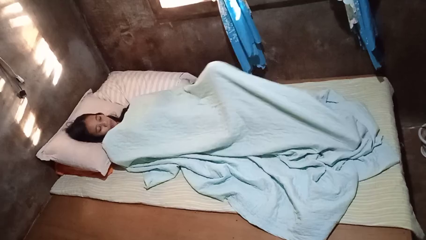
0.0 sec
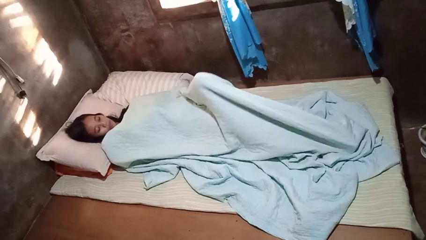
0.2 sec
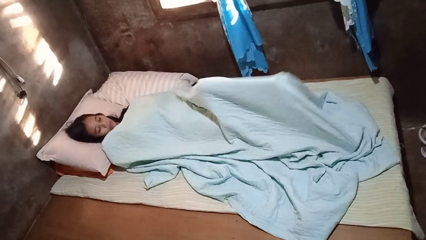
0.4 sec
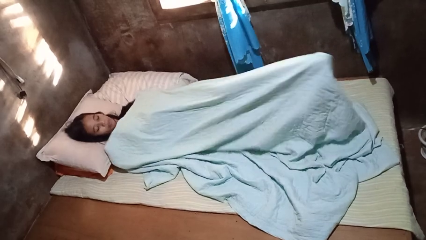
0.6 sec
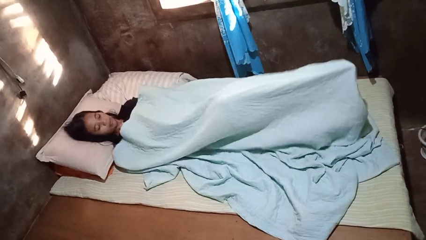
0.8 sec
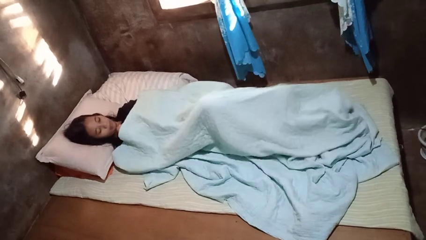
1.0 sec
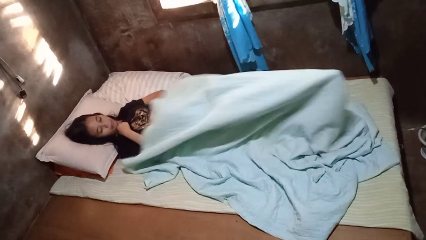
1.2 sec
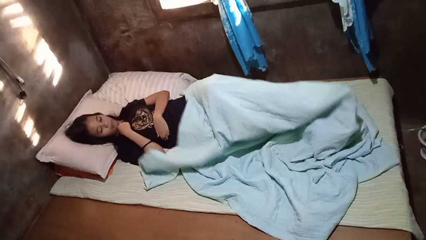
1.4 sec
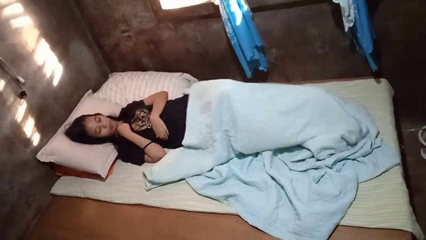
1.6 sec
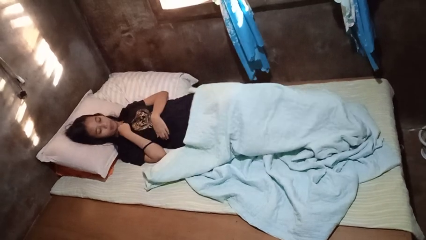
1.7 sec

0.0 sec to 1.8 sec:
person uncovers with bedsheets

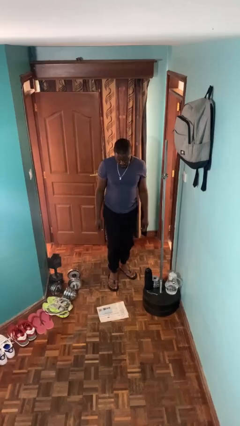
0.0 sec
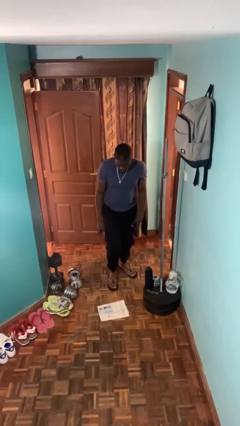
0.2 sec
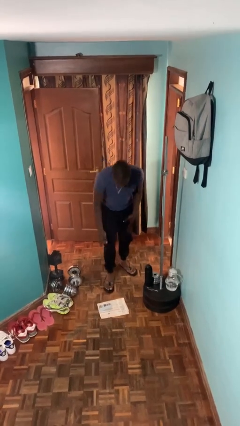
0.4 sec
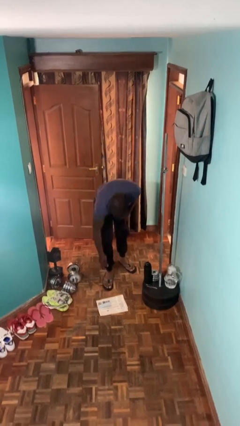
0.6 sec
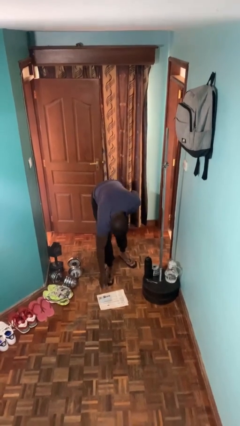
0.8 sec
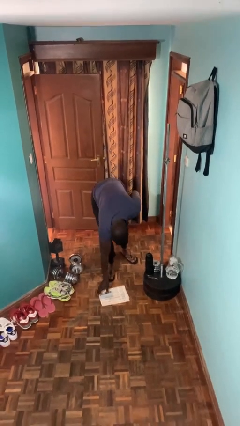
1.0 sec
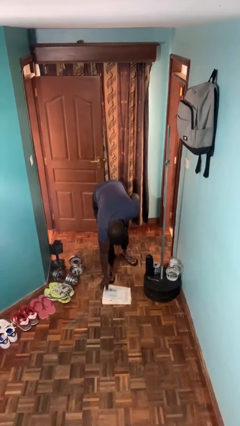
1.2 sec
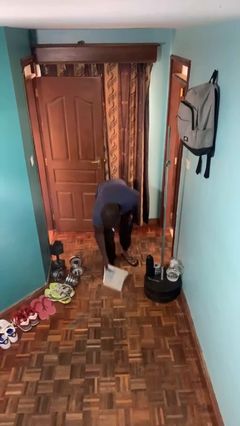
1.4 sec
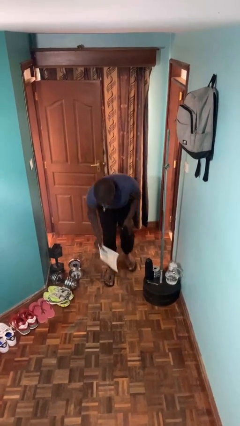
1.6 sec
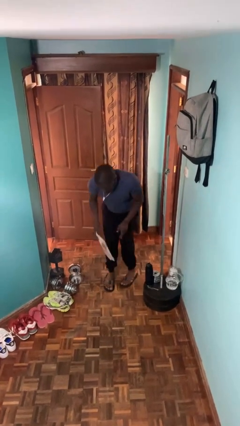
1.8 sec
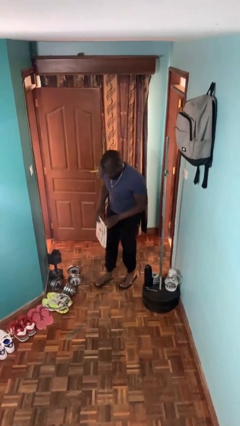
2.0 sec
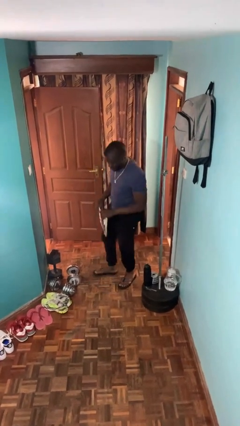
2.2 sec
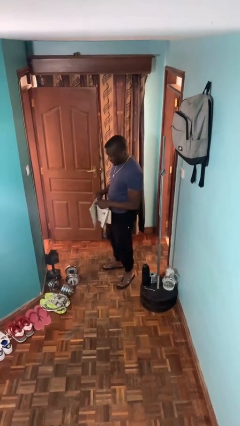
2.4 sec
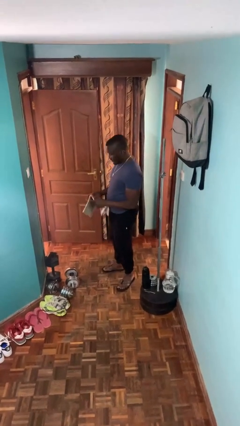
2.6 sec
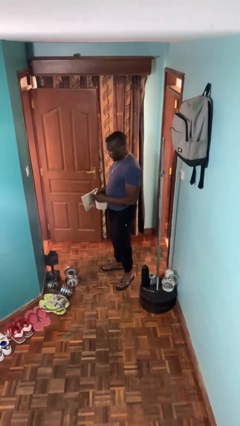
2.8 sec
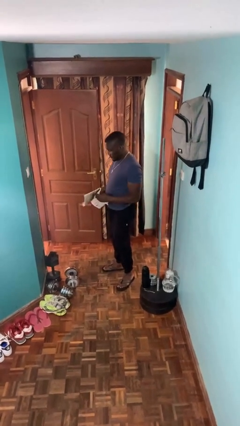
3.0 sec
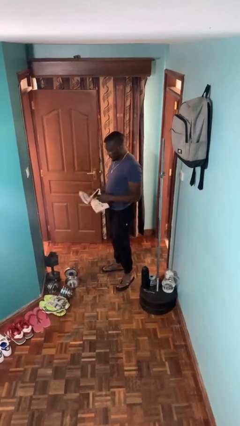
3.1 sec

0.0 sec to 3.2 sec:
person picks up object from floor

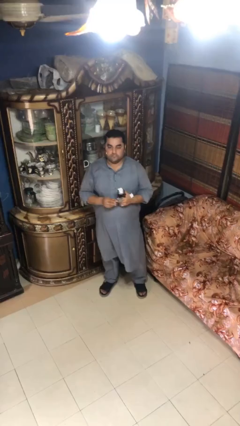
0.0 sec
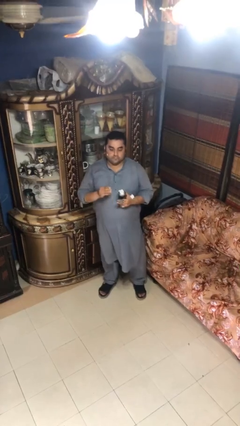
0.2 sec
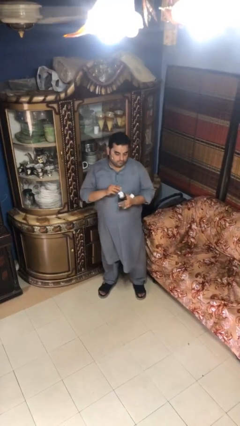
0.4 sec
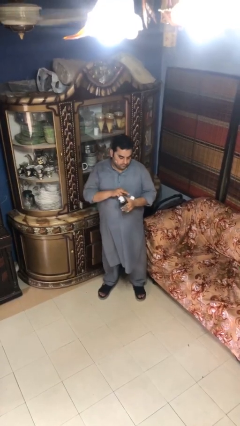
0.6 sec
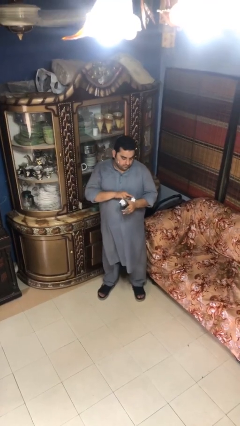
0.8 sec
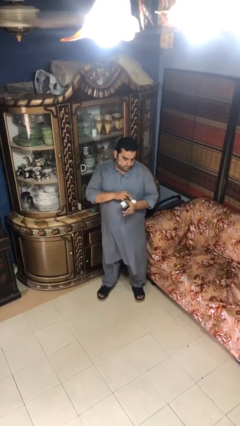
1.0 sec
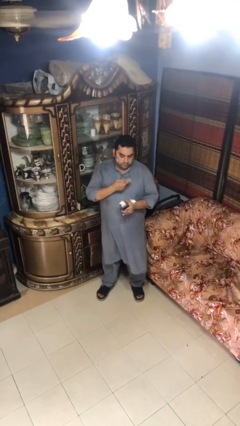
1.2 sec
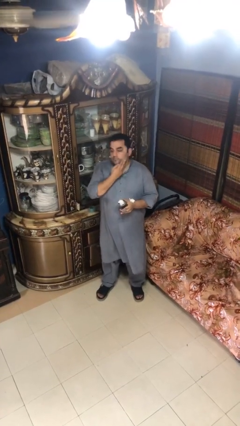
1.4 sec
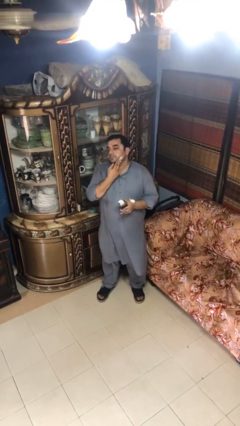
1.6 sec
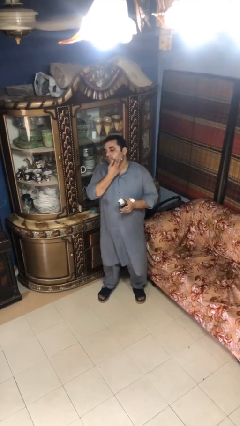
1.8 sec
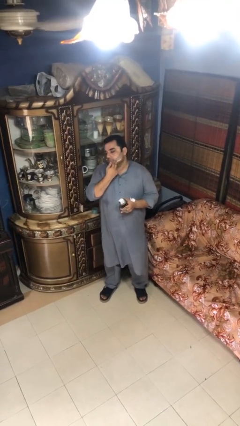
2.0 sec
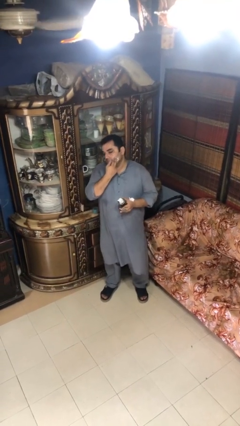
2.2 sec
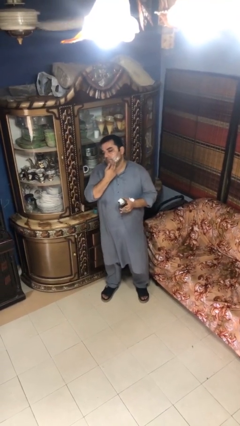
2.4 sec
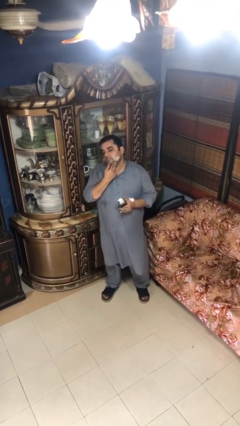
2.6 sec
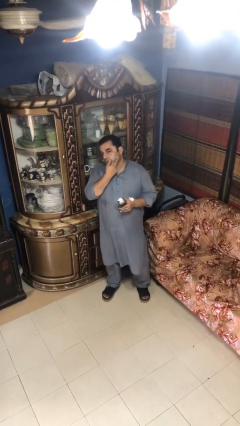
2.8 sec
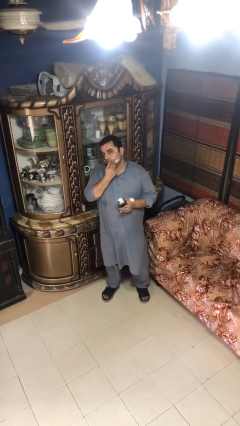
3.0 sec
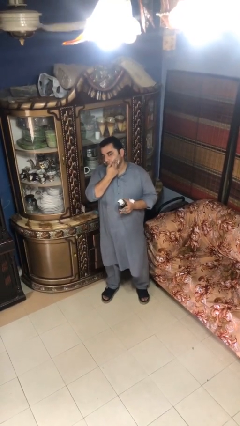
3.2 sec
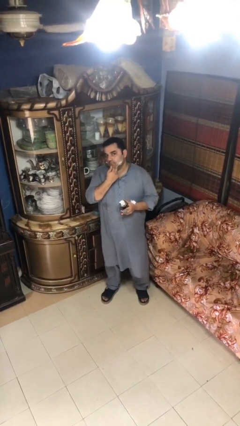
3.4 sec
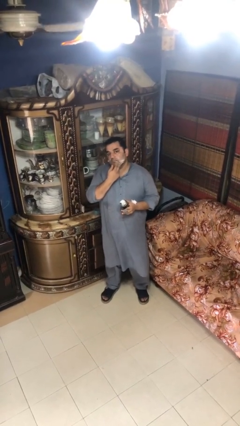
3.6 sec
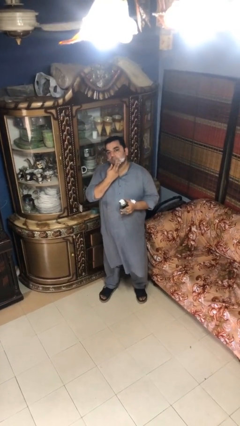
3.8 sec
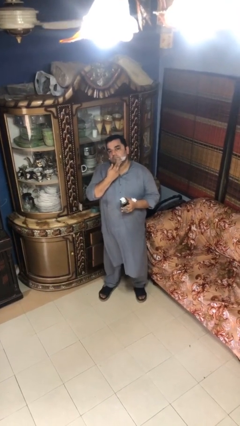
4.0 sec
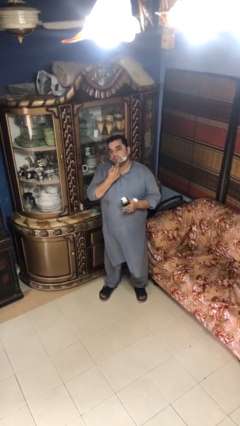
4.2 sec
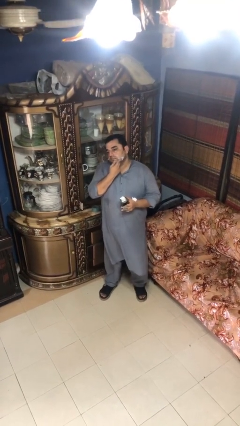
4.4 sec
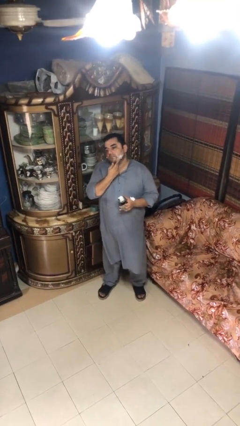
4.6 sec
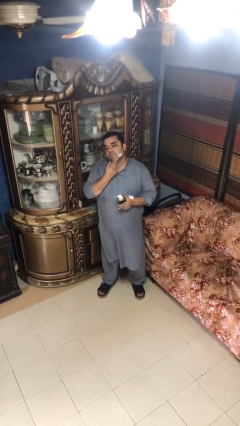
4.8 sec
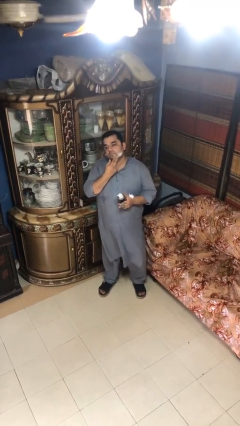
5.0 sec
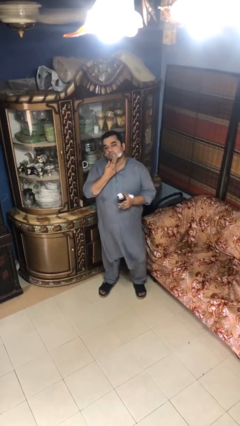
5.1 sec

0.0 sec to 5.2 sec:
person applies shaving cream

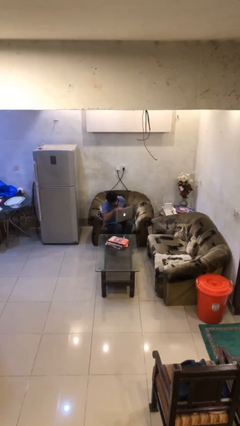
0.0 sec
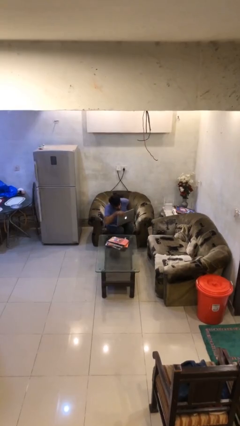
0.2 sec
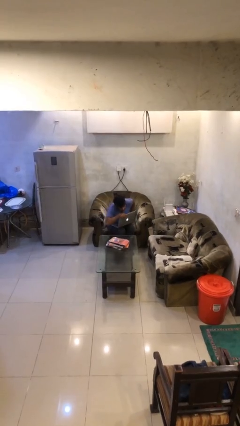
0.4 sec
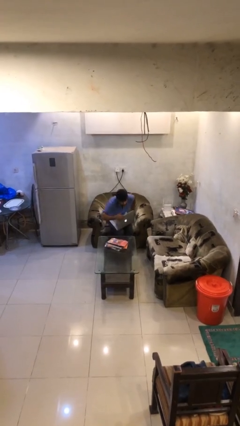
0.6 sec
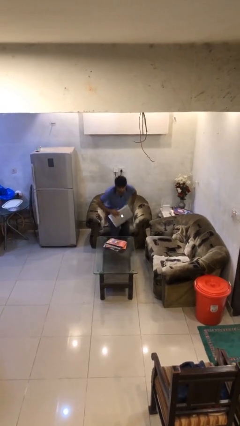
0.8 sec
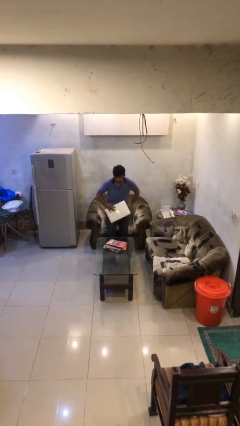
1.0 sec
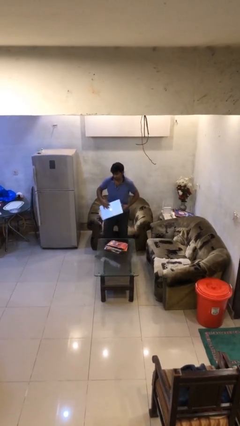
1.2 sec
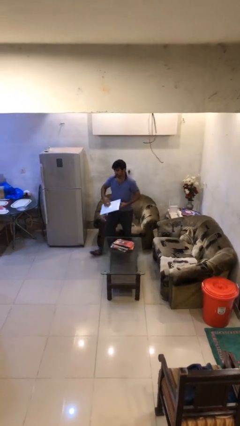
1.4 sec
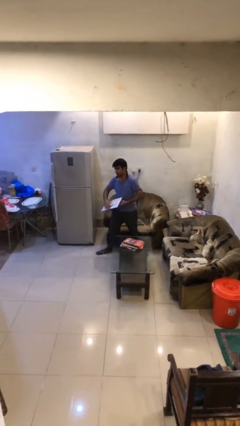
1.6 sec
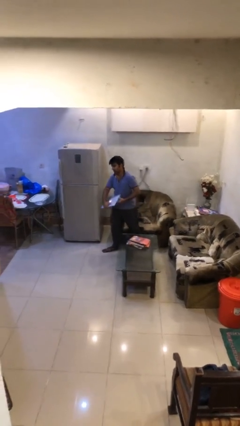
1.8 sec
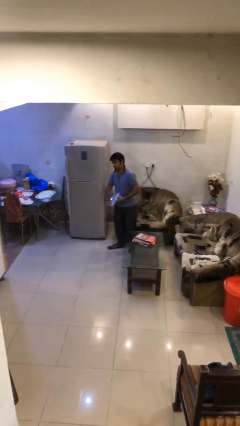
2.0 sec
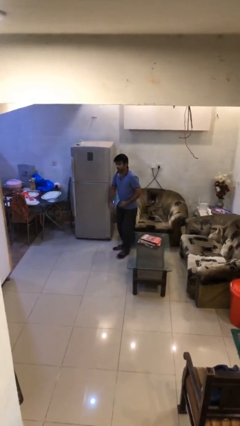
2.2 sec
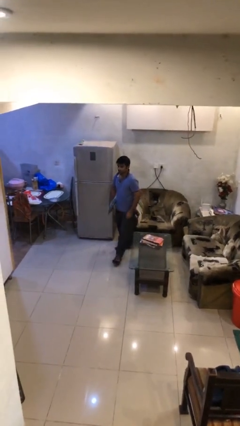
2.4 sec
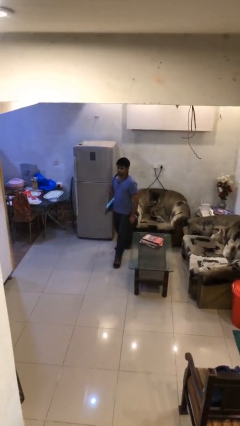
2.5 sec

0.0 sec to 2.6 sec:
person stands up

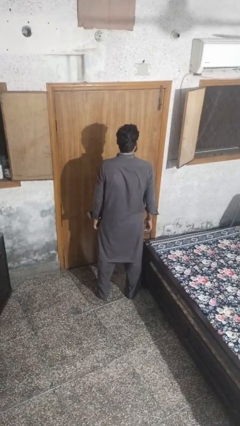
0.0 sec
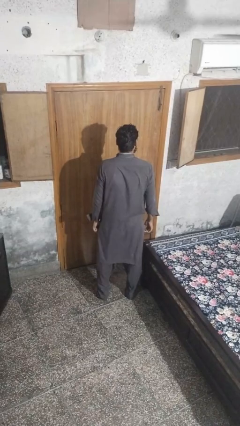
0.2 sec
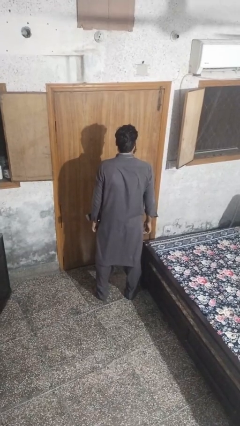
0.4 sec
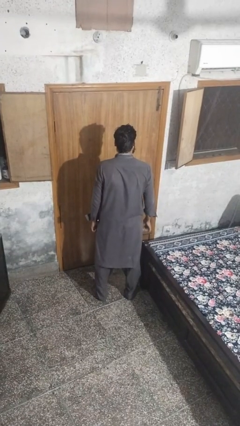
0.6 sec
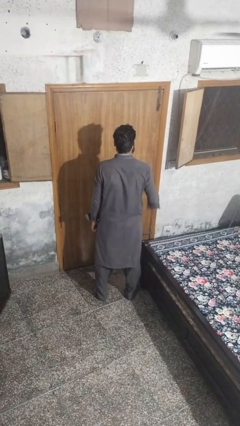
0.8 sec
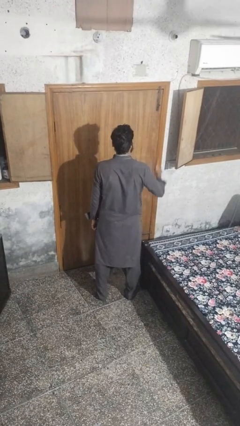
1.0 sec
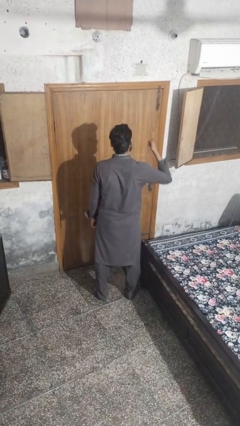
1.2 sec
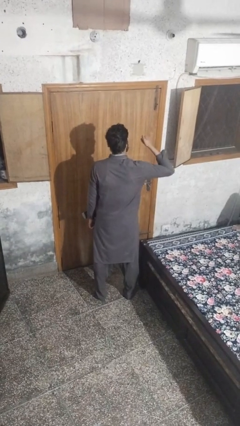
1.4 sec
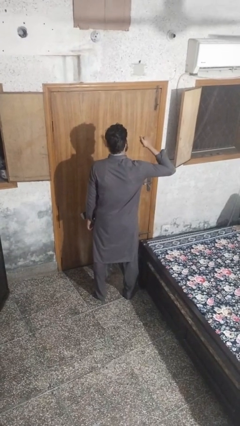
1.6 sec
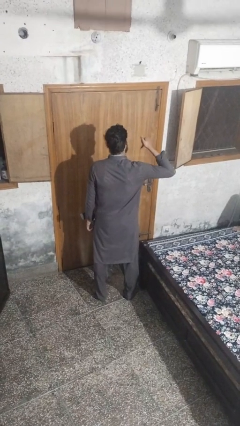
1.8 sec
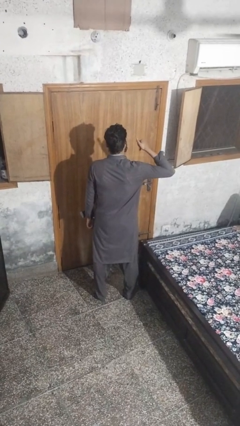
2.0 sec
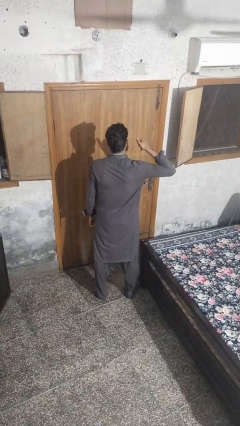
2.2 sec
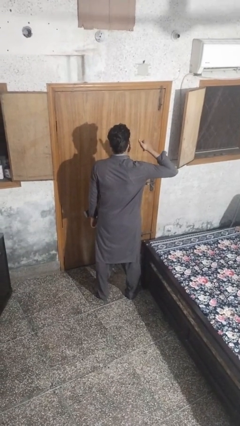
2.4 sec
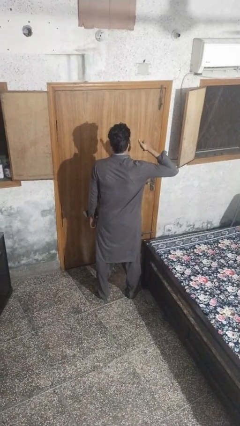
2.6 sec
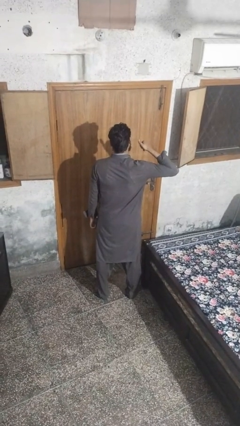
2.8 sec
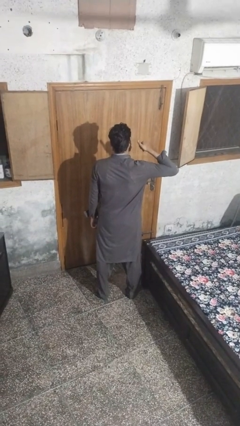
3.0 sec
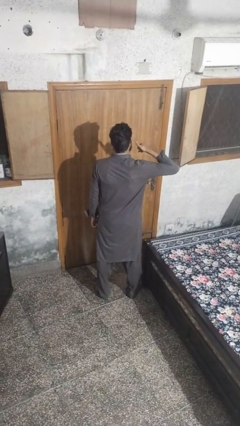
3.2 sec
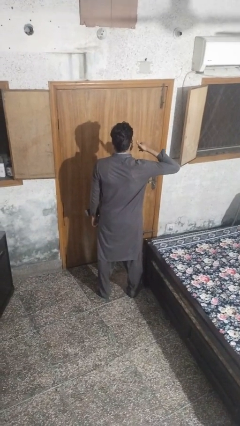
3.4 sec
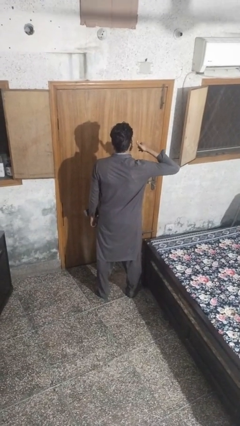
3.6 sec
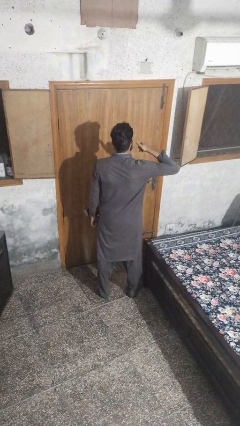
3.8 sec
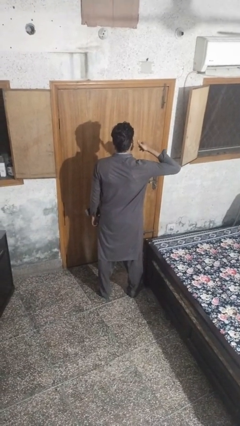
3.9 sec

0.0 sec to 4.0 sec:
person gestures call me

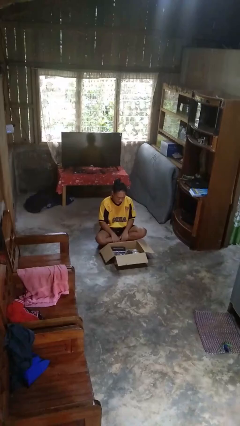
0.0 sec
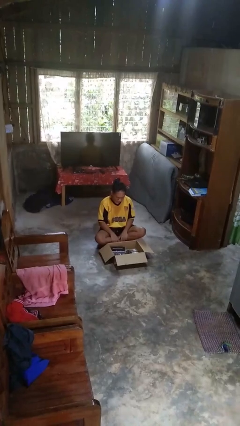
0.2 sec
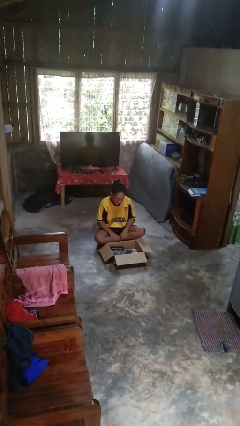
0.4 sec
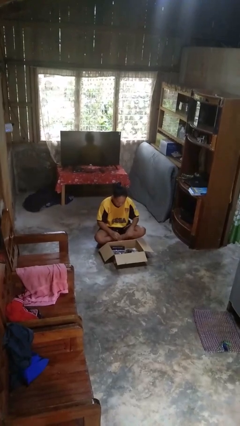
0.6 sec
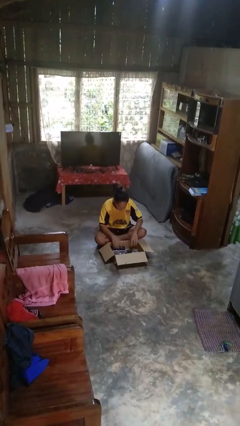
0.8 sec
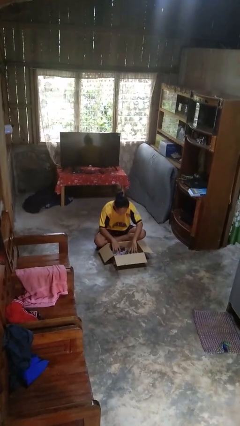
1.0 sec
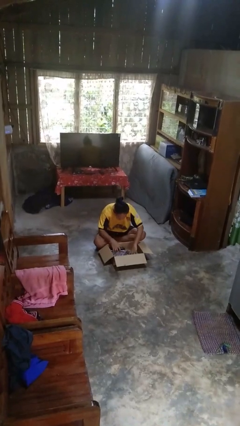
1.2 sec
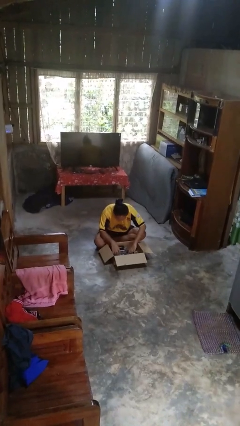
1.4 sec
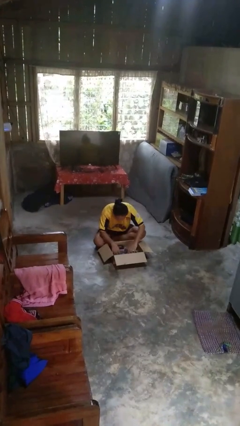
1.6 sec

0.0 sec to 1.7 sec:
person searches in box
